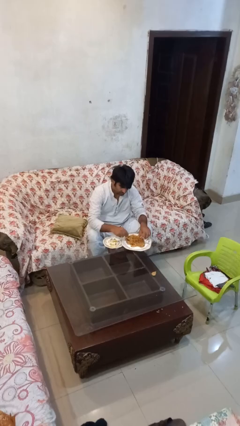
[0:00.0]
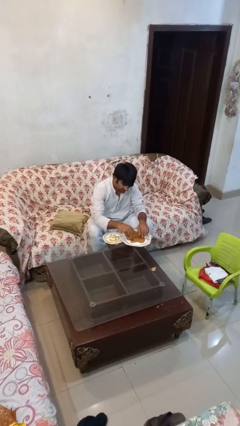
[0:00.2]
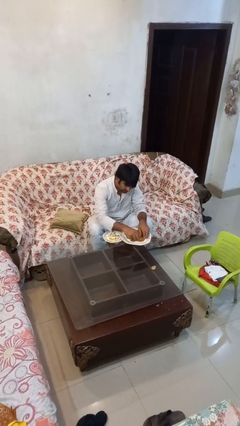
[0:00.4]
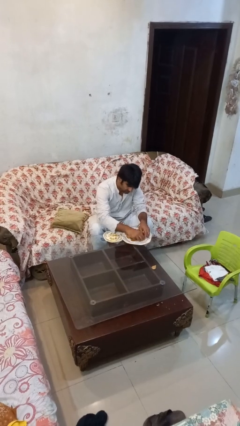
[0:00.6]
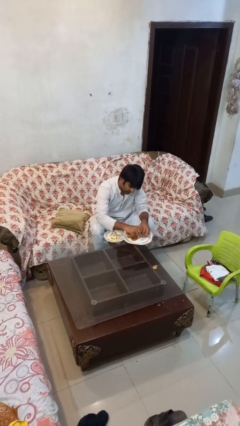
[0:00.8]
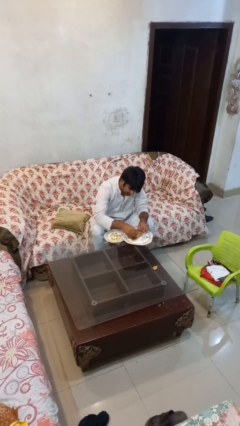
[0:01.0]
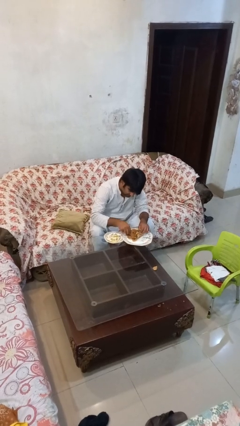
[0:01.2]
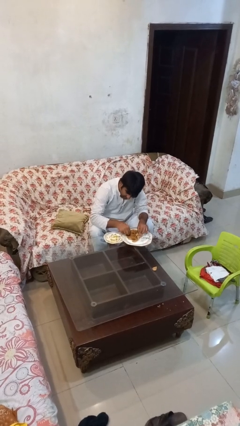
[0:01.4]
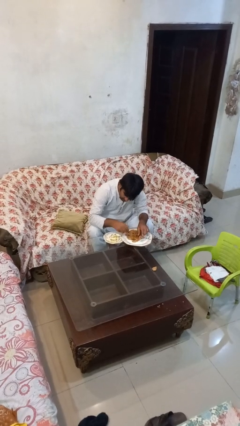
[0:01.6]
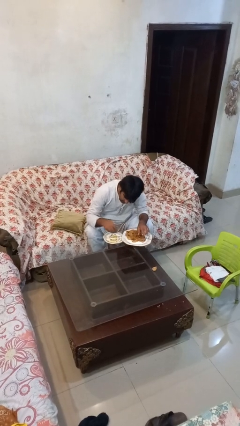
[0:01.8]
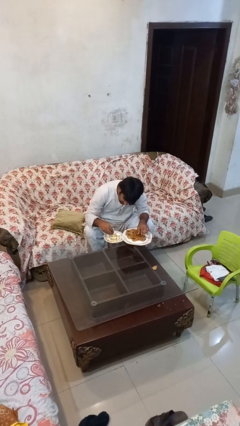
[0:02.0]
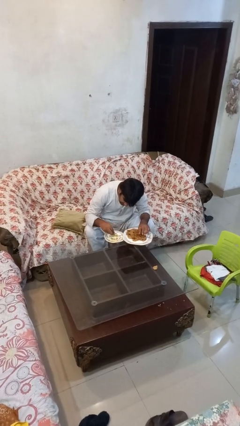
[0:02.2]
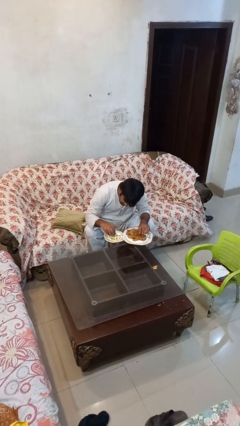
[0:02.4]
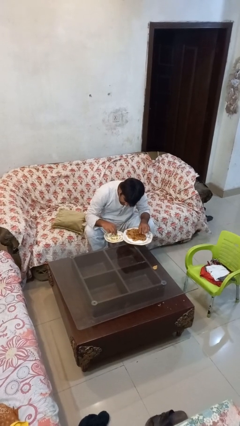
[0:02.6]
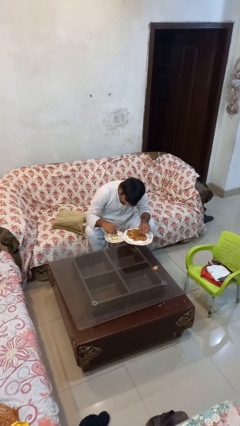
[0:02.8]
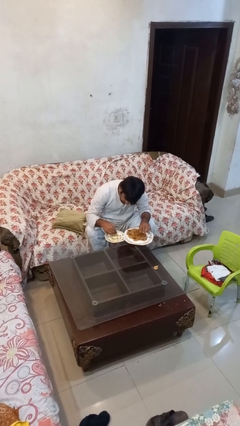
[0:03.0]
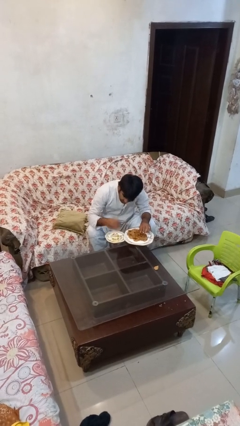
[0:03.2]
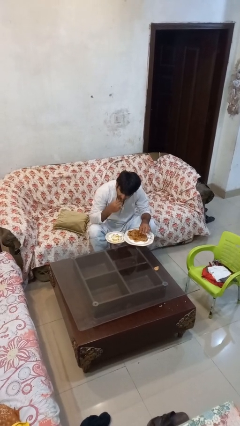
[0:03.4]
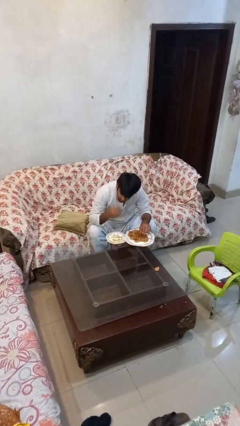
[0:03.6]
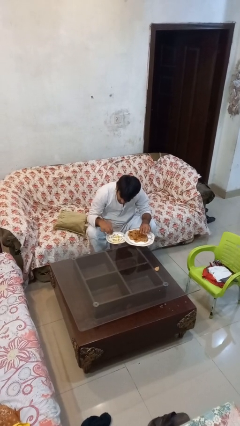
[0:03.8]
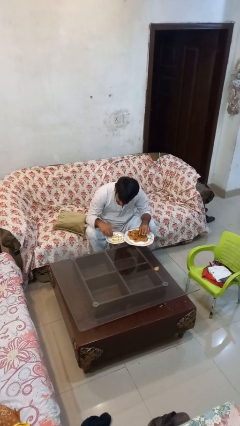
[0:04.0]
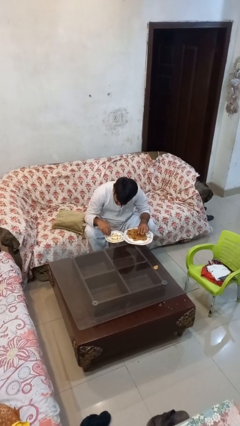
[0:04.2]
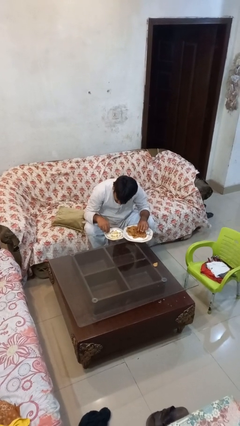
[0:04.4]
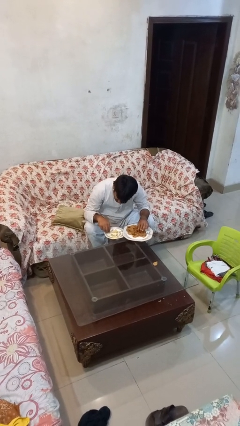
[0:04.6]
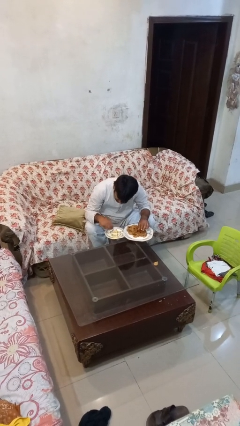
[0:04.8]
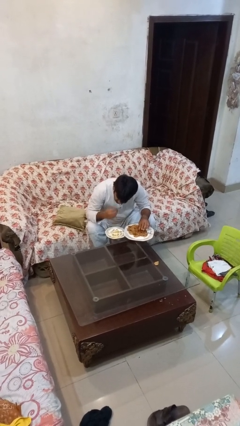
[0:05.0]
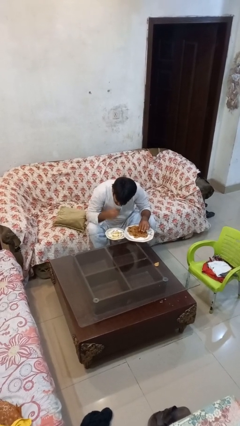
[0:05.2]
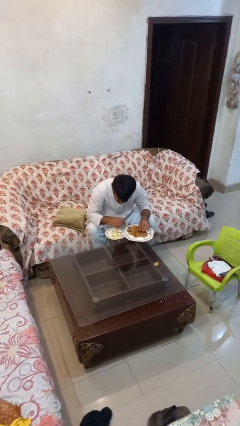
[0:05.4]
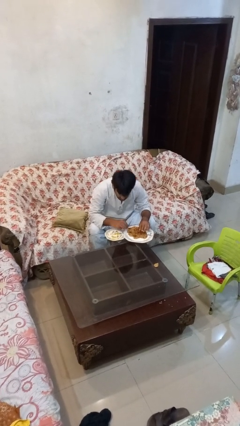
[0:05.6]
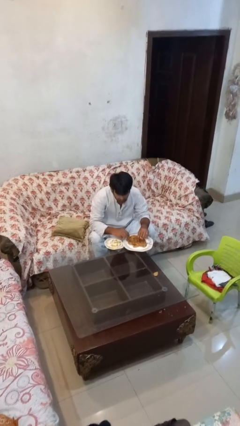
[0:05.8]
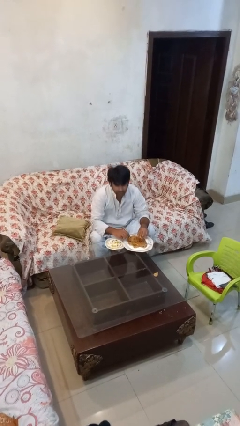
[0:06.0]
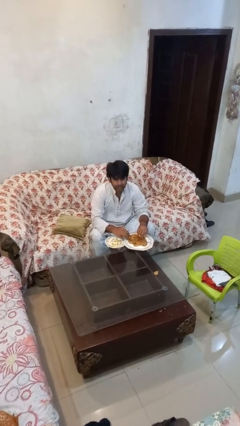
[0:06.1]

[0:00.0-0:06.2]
person eats with hands

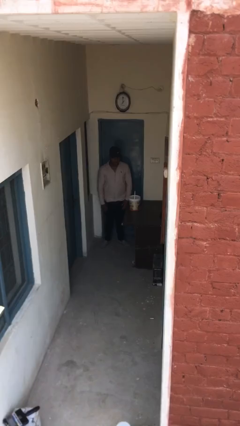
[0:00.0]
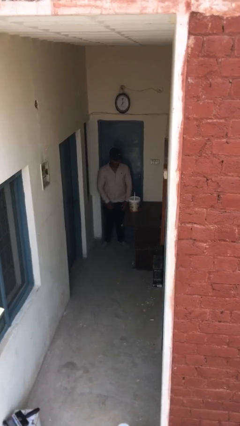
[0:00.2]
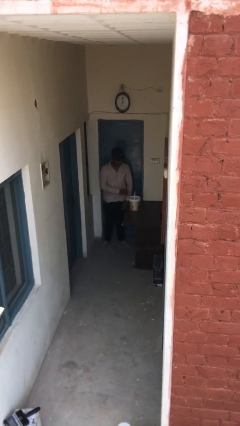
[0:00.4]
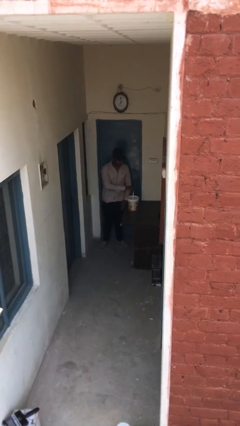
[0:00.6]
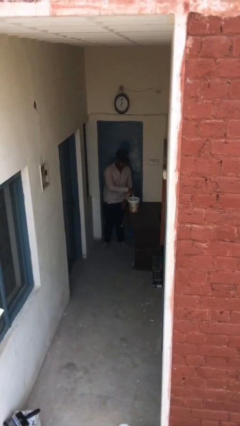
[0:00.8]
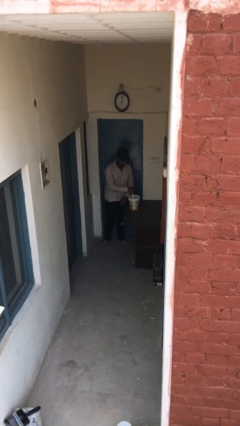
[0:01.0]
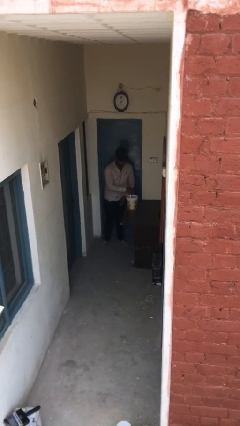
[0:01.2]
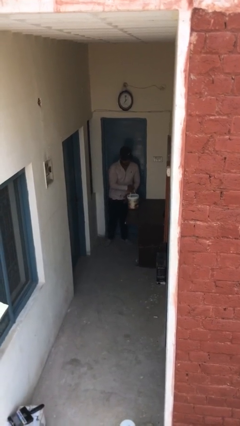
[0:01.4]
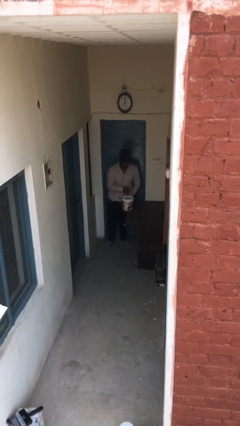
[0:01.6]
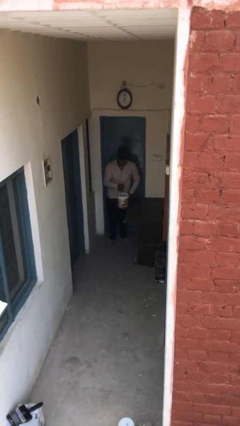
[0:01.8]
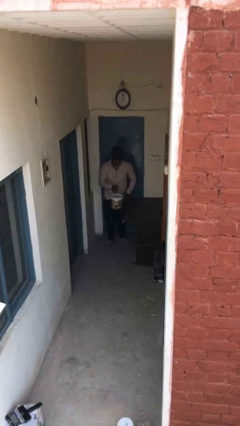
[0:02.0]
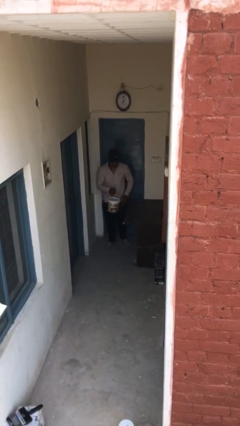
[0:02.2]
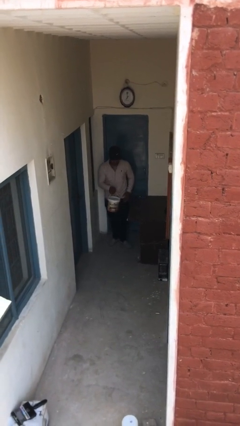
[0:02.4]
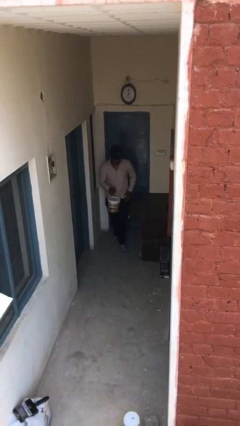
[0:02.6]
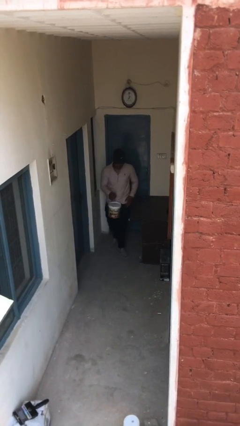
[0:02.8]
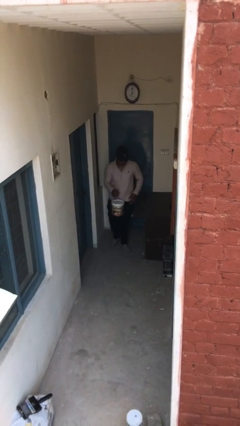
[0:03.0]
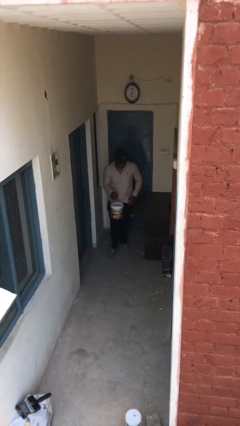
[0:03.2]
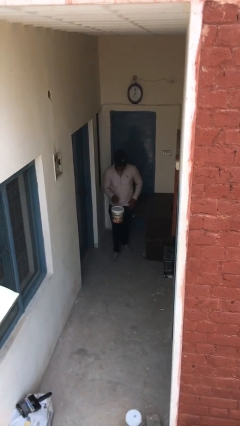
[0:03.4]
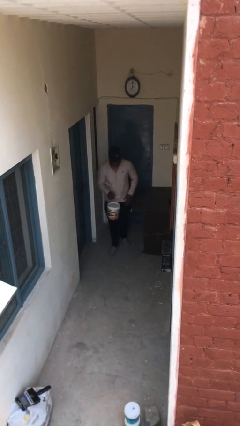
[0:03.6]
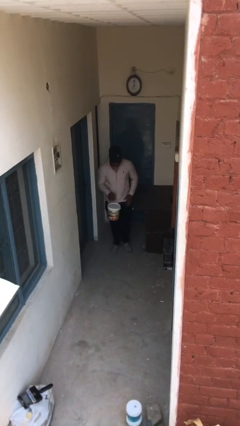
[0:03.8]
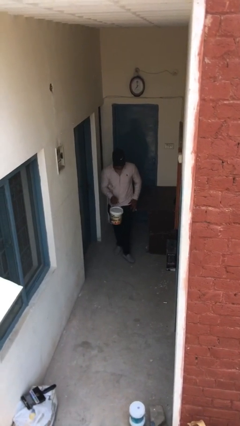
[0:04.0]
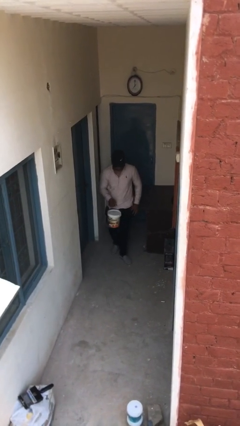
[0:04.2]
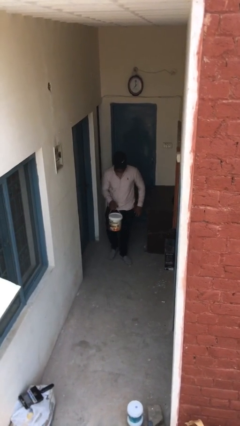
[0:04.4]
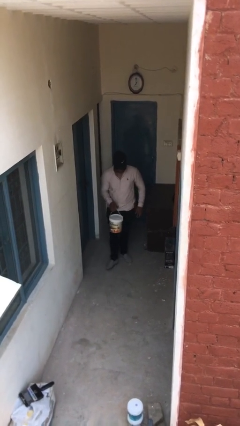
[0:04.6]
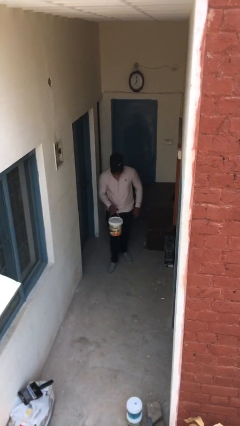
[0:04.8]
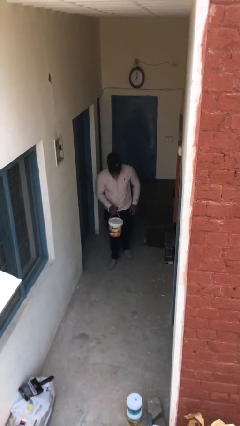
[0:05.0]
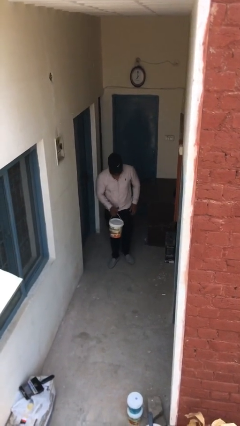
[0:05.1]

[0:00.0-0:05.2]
person picks up object from table

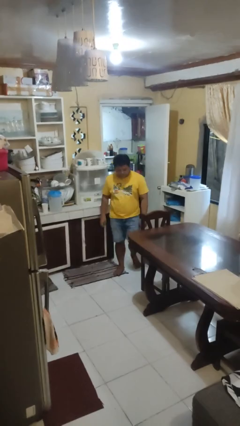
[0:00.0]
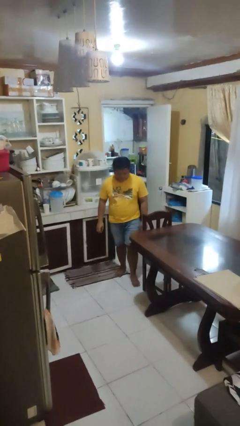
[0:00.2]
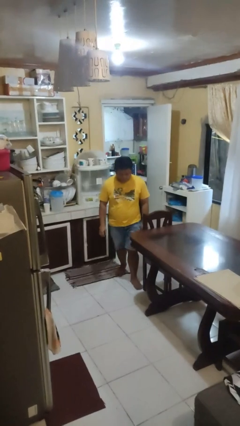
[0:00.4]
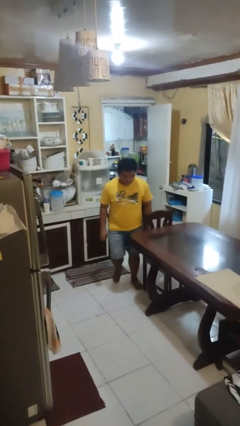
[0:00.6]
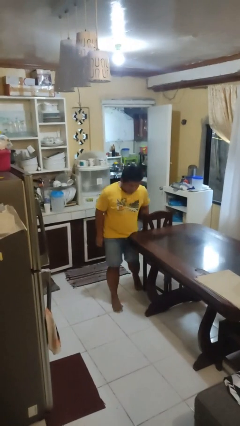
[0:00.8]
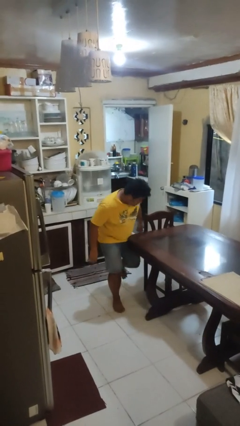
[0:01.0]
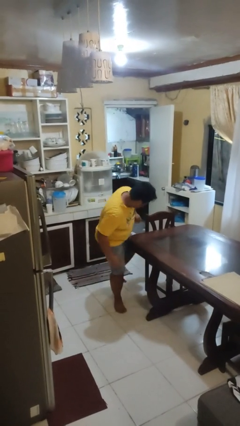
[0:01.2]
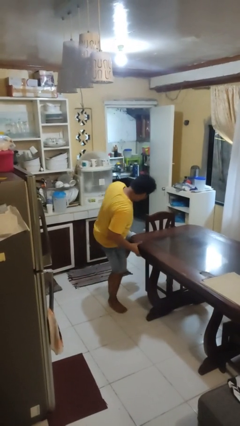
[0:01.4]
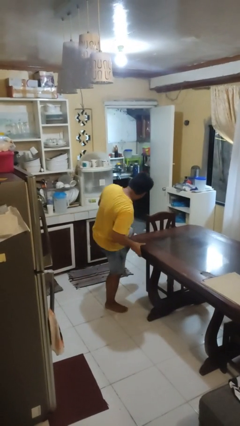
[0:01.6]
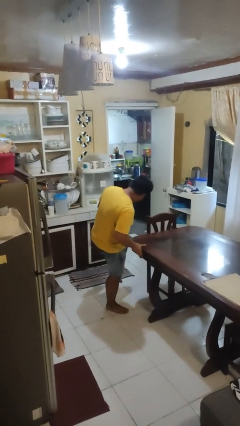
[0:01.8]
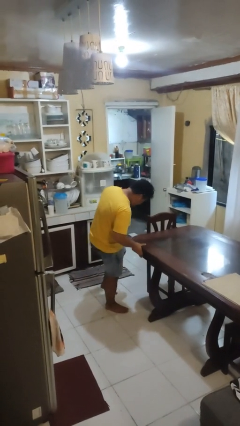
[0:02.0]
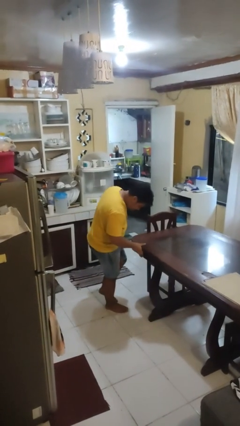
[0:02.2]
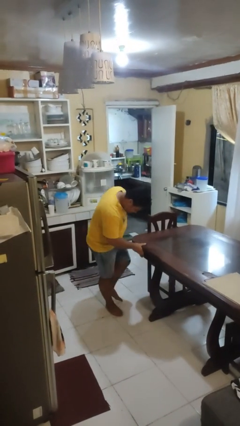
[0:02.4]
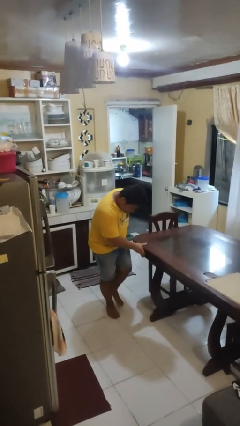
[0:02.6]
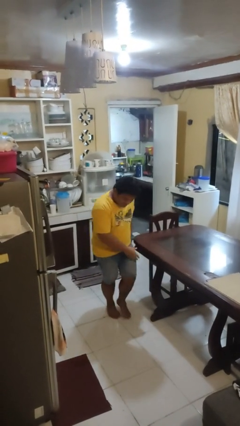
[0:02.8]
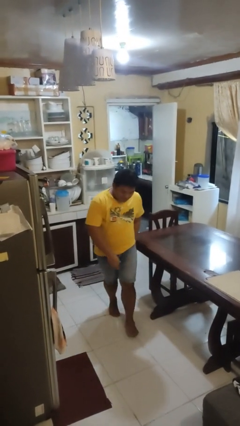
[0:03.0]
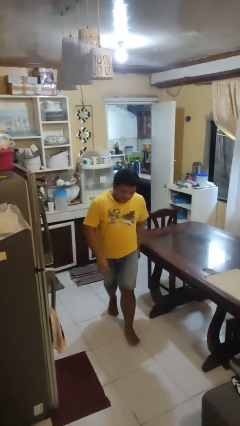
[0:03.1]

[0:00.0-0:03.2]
person bumps into table

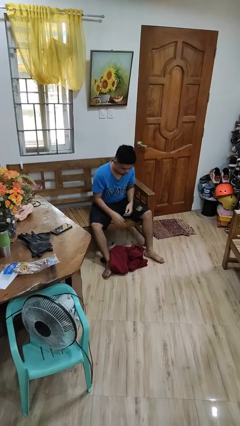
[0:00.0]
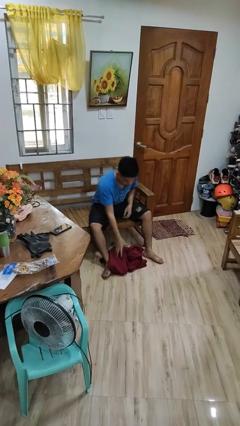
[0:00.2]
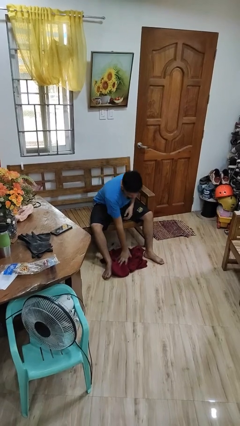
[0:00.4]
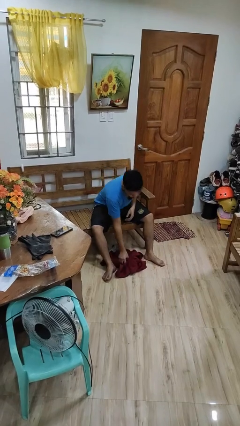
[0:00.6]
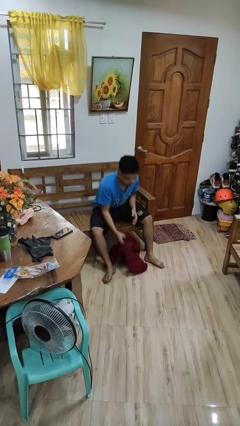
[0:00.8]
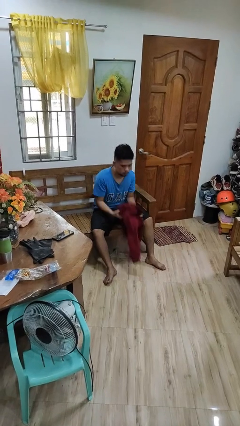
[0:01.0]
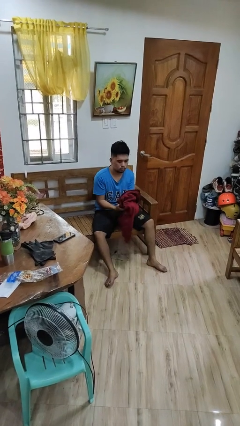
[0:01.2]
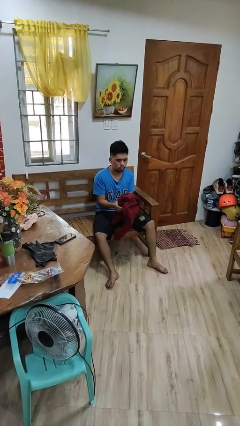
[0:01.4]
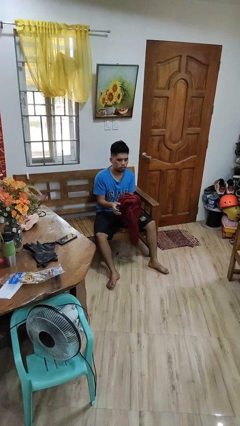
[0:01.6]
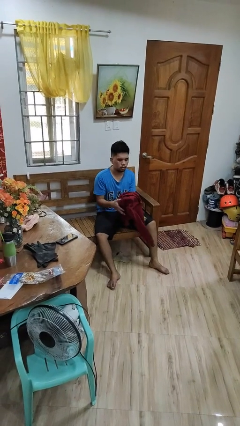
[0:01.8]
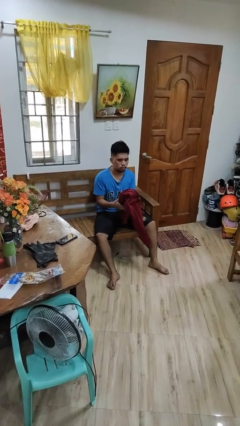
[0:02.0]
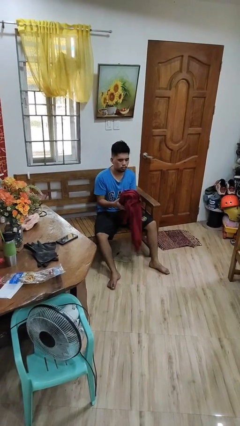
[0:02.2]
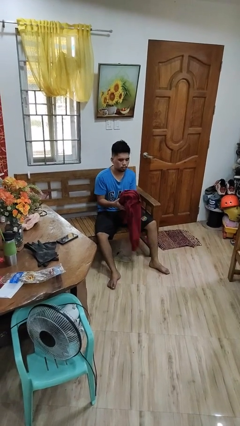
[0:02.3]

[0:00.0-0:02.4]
person picks up object from floor

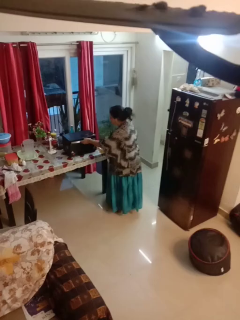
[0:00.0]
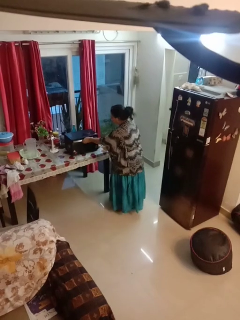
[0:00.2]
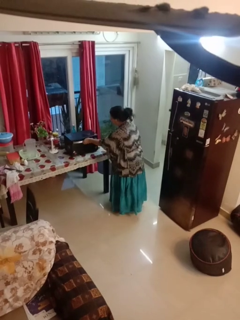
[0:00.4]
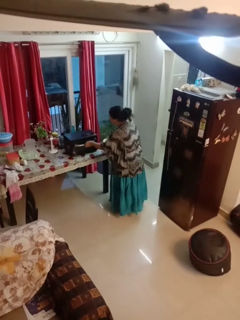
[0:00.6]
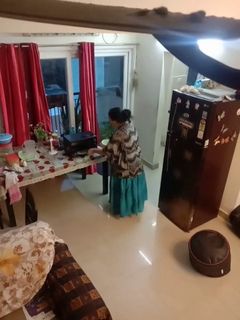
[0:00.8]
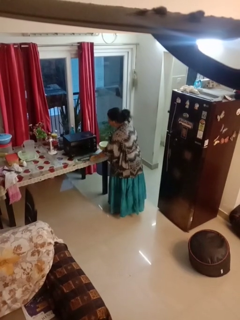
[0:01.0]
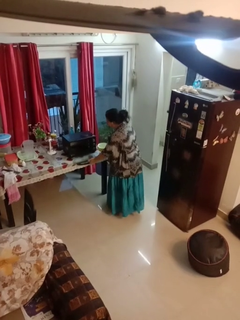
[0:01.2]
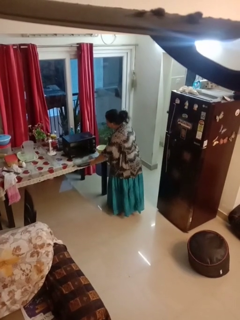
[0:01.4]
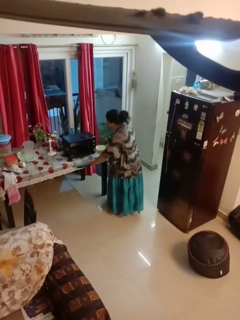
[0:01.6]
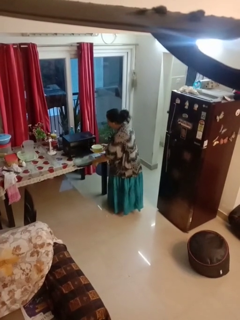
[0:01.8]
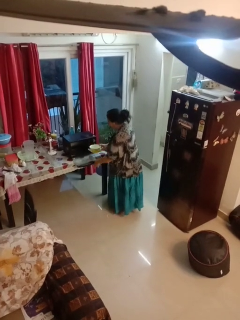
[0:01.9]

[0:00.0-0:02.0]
person opens microwave
